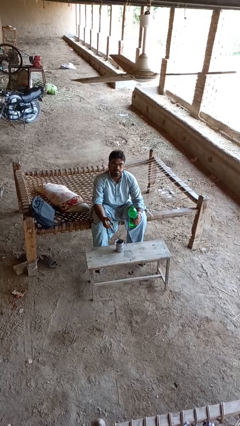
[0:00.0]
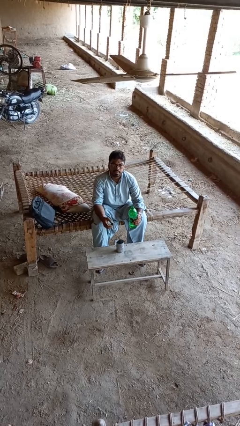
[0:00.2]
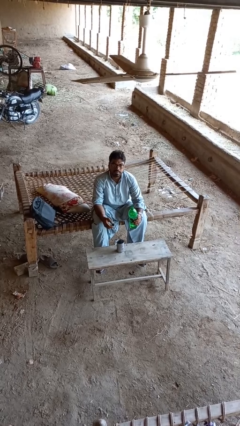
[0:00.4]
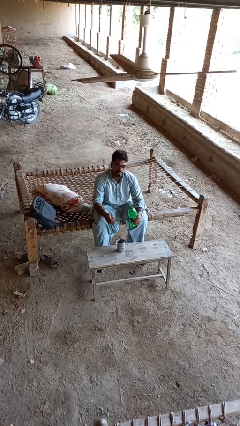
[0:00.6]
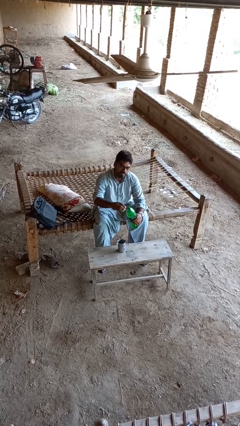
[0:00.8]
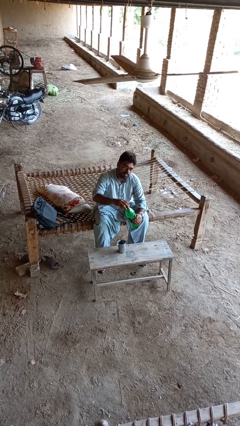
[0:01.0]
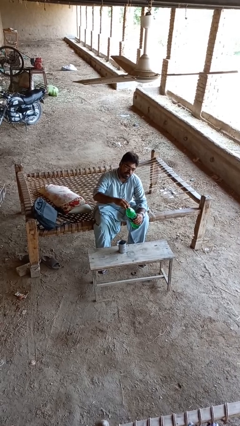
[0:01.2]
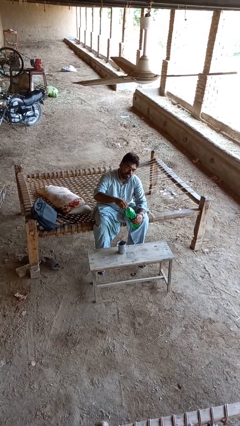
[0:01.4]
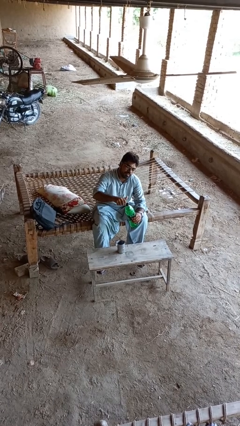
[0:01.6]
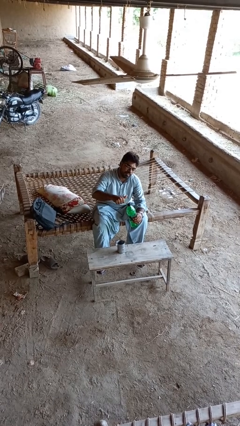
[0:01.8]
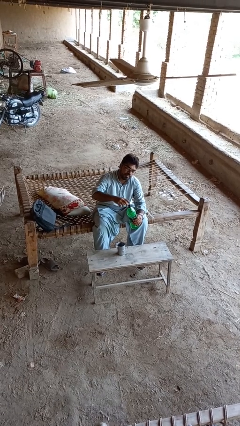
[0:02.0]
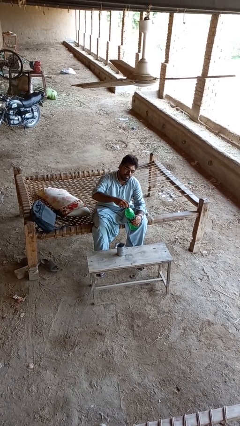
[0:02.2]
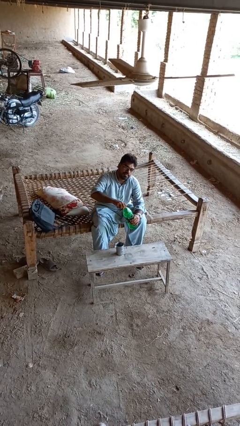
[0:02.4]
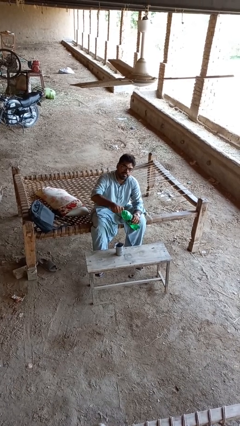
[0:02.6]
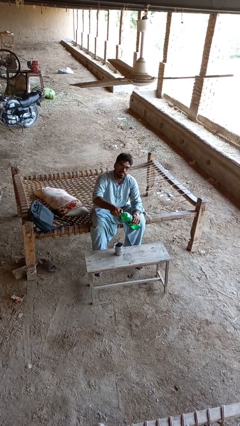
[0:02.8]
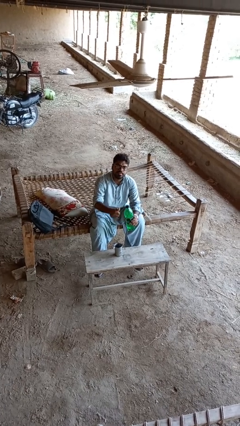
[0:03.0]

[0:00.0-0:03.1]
person screws lid to bottle

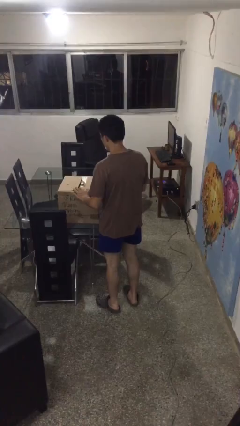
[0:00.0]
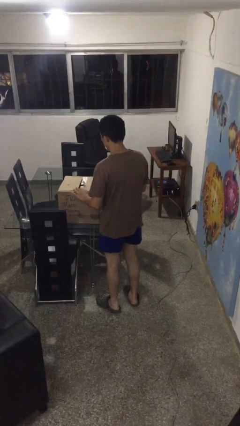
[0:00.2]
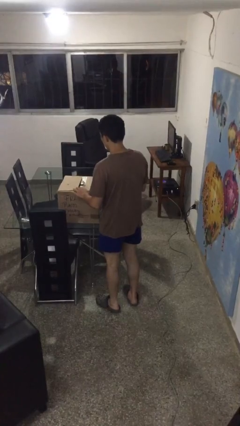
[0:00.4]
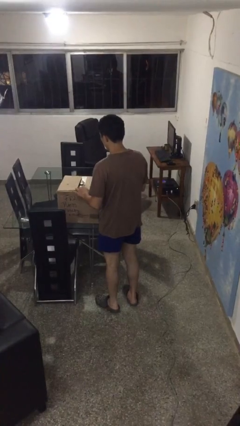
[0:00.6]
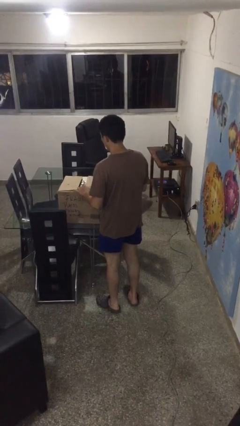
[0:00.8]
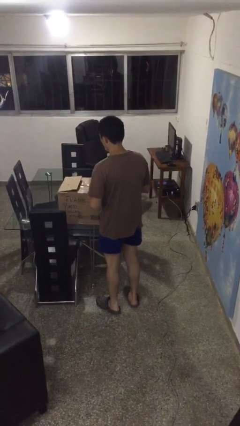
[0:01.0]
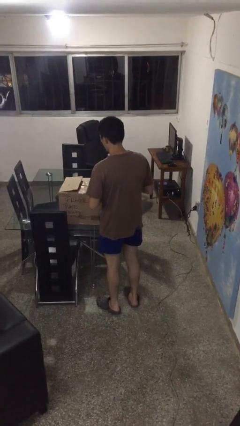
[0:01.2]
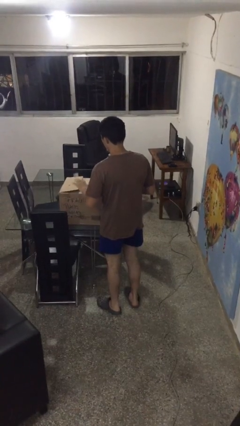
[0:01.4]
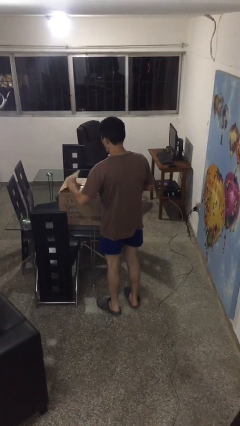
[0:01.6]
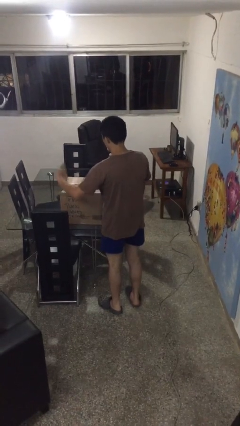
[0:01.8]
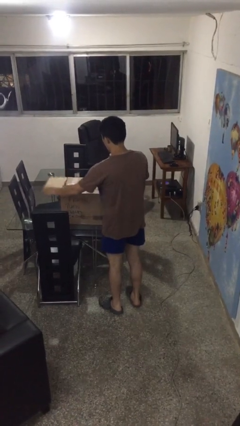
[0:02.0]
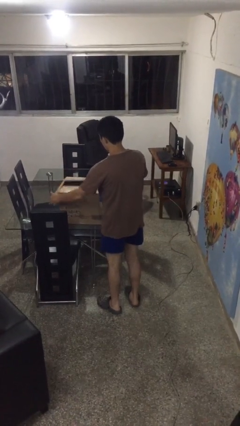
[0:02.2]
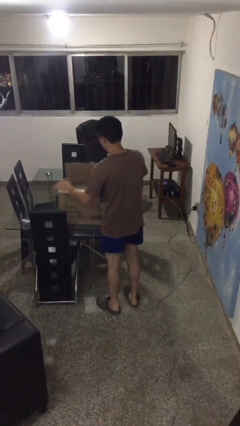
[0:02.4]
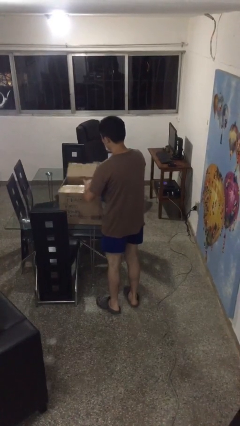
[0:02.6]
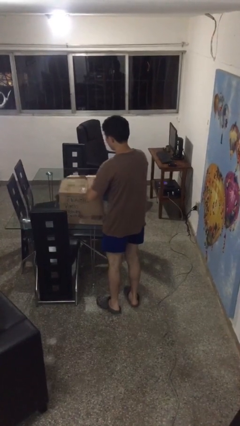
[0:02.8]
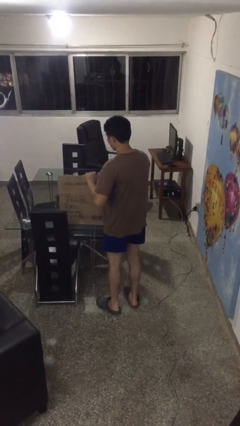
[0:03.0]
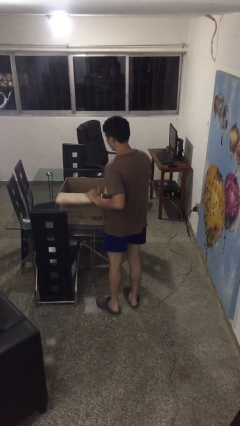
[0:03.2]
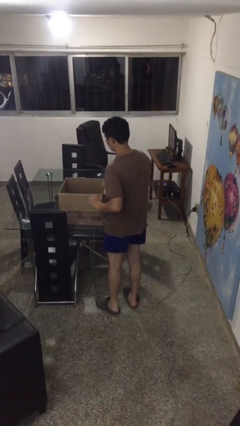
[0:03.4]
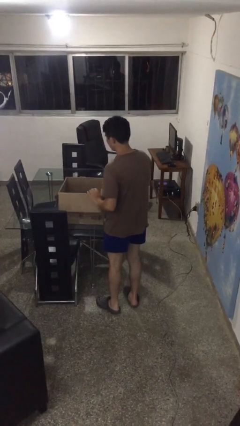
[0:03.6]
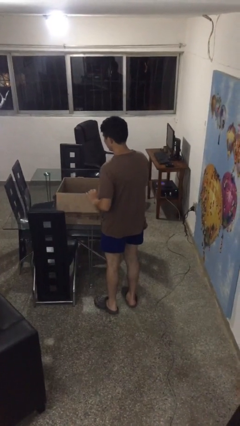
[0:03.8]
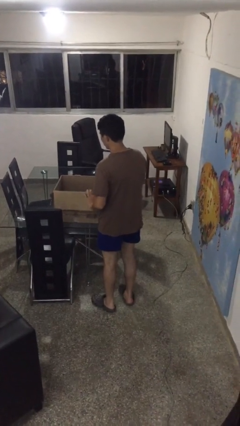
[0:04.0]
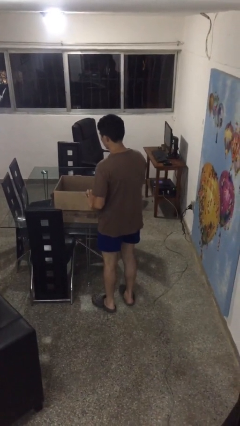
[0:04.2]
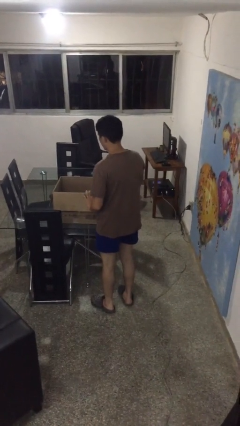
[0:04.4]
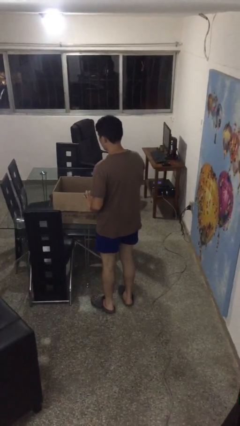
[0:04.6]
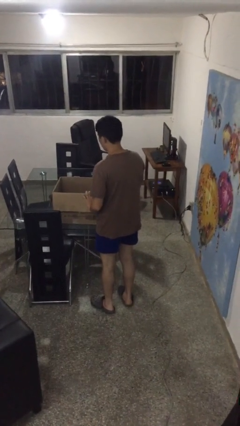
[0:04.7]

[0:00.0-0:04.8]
person opens box

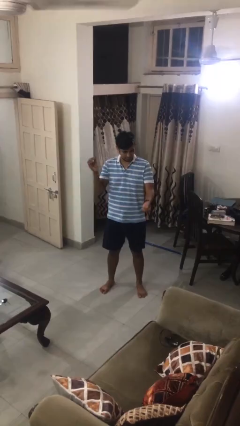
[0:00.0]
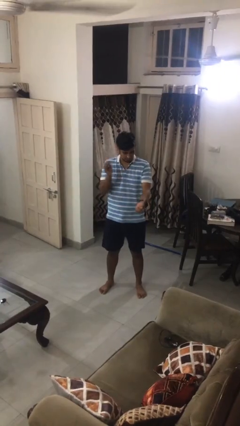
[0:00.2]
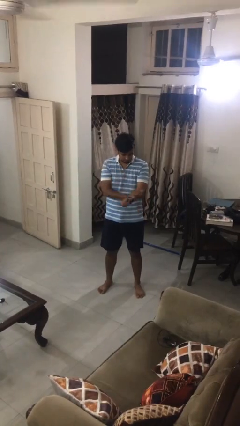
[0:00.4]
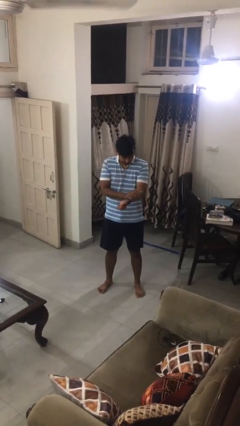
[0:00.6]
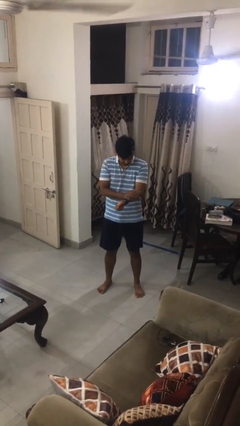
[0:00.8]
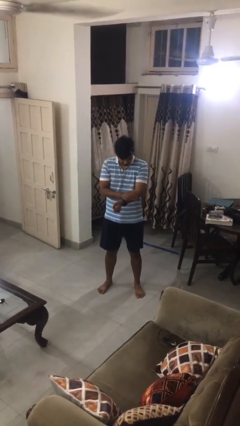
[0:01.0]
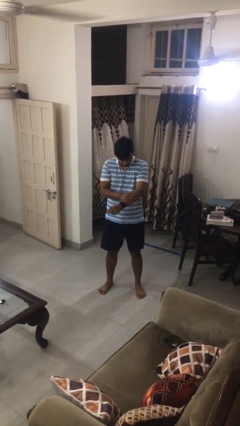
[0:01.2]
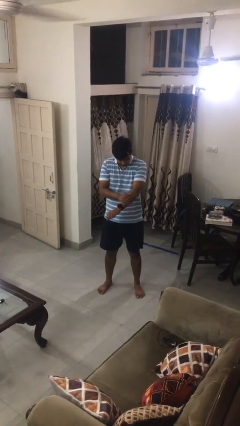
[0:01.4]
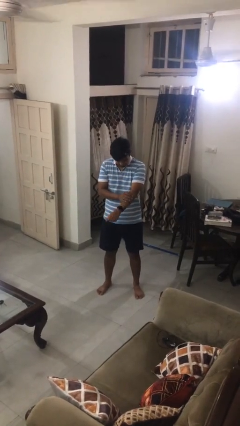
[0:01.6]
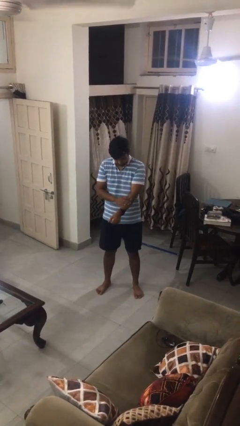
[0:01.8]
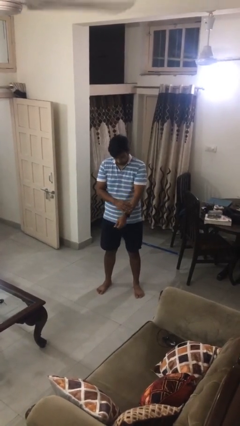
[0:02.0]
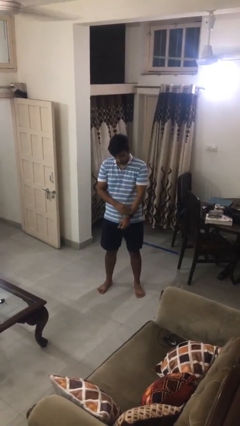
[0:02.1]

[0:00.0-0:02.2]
person swats bug

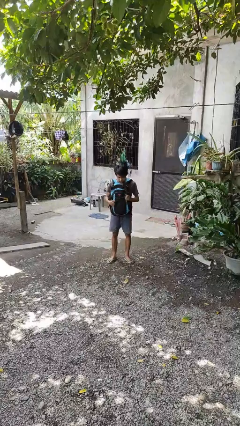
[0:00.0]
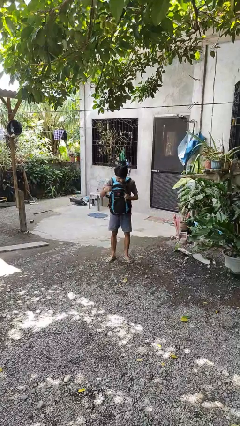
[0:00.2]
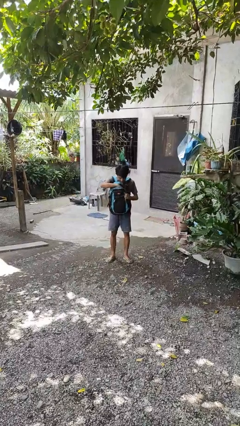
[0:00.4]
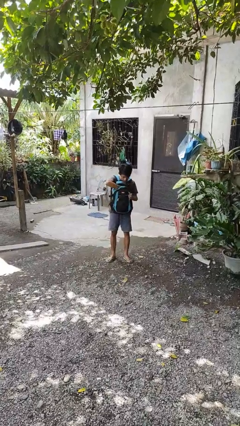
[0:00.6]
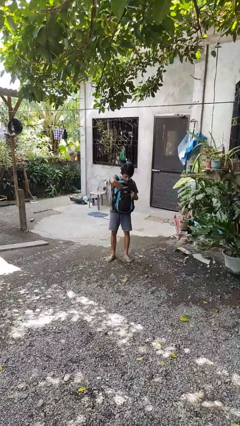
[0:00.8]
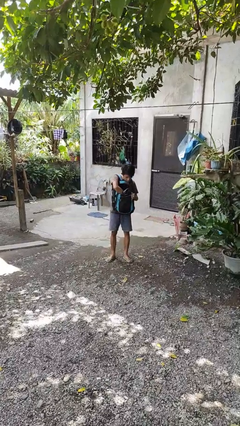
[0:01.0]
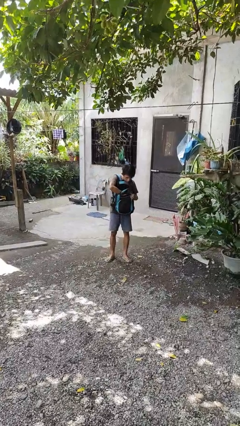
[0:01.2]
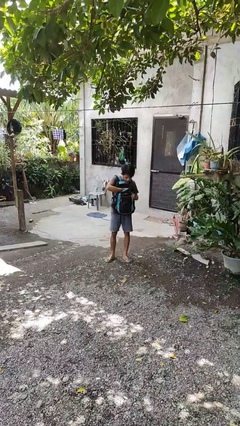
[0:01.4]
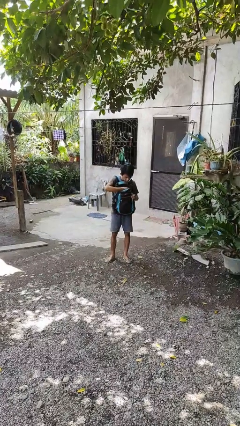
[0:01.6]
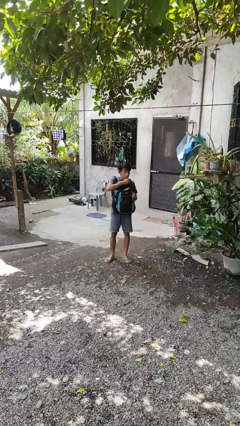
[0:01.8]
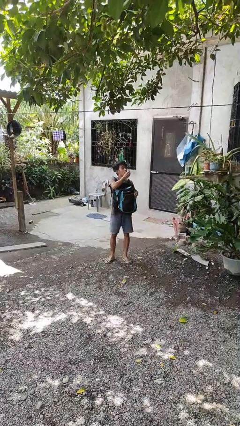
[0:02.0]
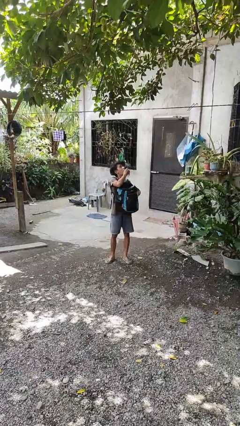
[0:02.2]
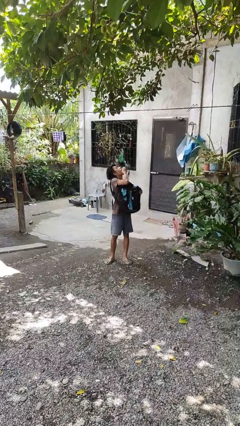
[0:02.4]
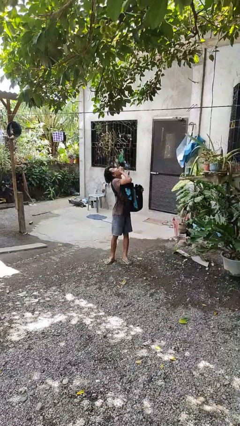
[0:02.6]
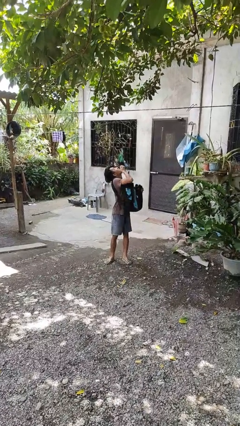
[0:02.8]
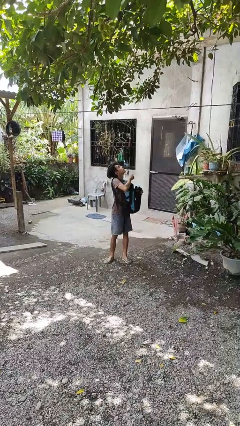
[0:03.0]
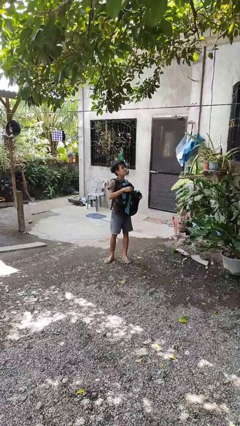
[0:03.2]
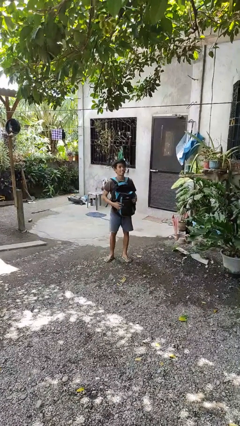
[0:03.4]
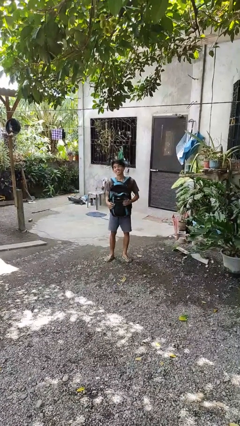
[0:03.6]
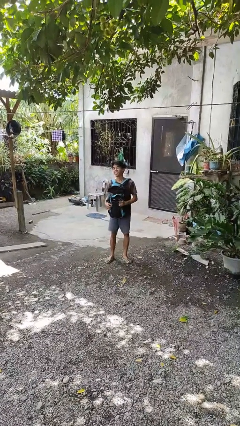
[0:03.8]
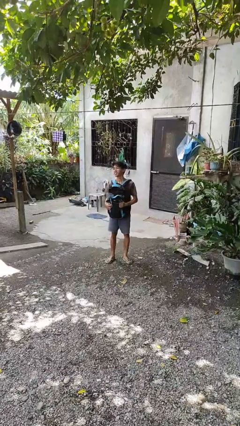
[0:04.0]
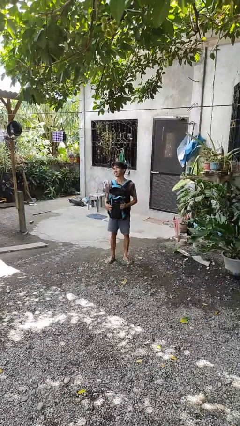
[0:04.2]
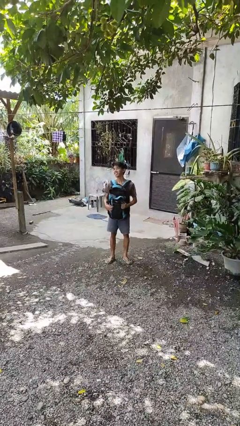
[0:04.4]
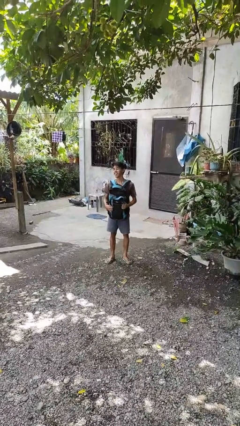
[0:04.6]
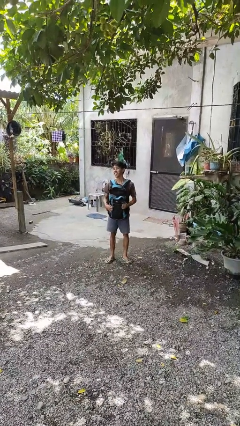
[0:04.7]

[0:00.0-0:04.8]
person eats snack from bag

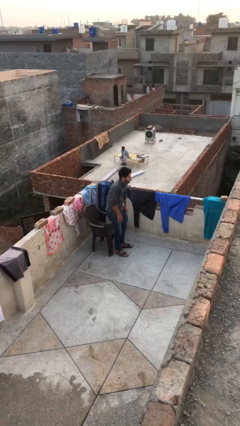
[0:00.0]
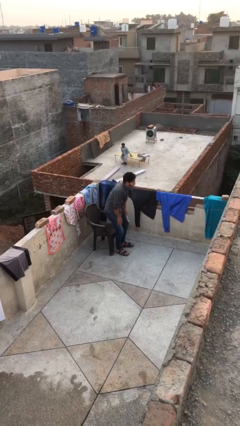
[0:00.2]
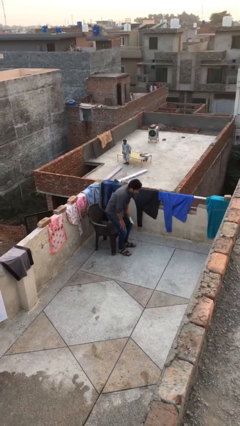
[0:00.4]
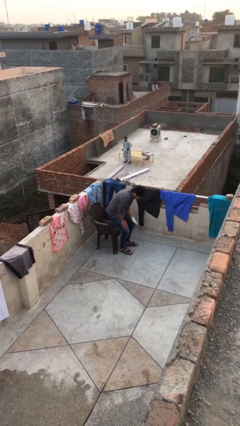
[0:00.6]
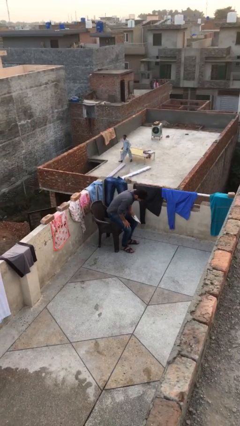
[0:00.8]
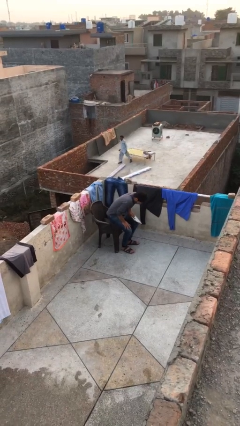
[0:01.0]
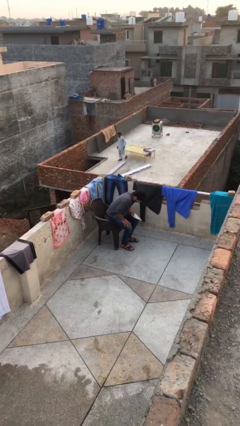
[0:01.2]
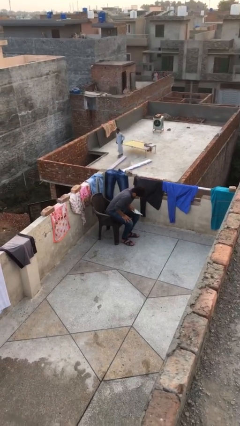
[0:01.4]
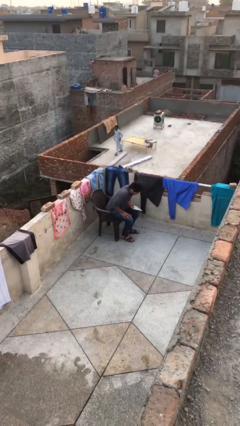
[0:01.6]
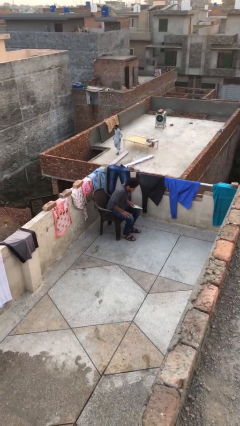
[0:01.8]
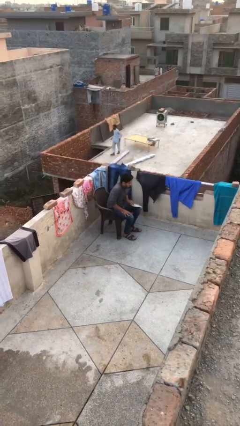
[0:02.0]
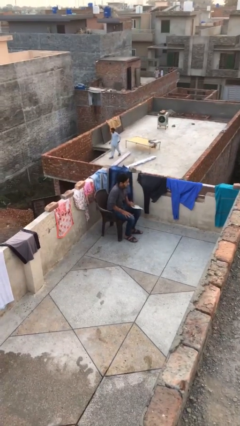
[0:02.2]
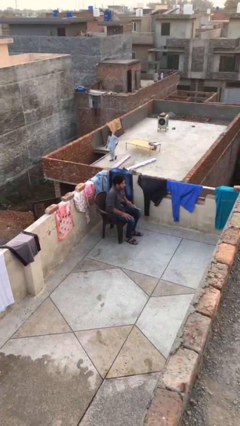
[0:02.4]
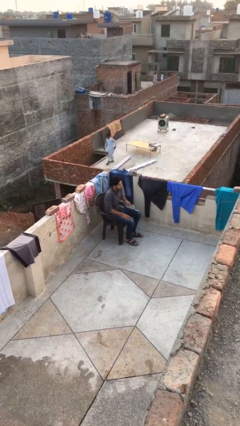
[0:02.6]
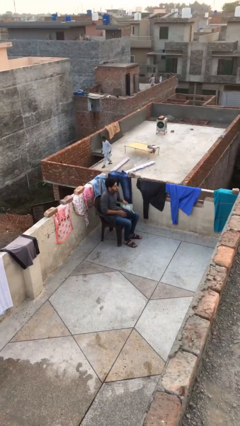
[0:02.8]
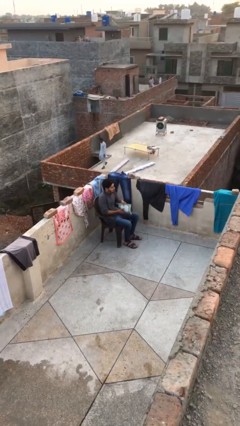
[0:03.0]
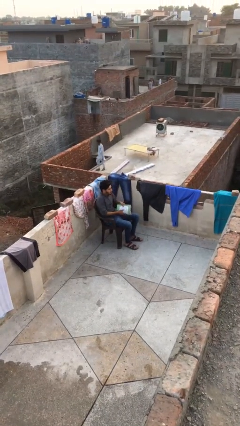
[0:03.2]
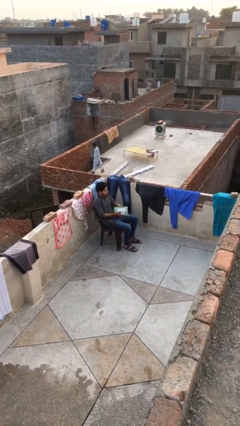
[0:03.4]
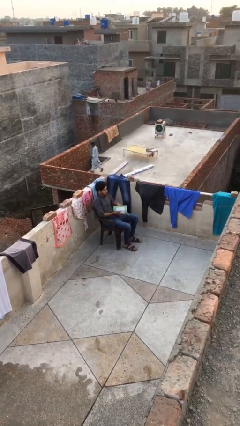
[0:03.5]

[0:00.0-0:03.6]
person sits down
